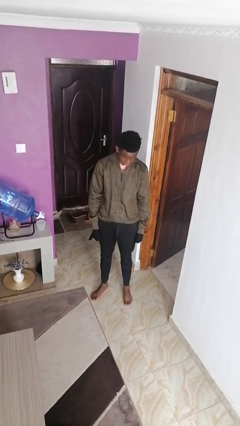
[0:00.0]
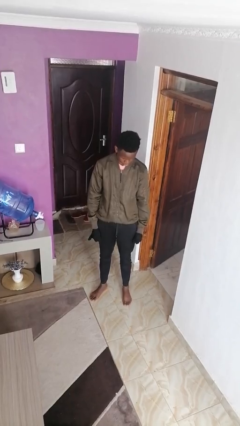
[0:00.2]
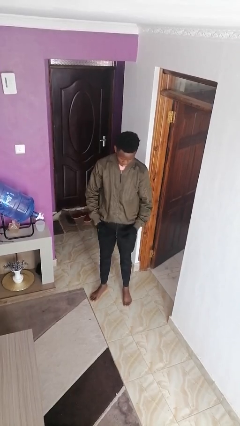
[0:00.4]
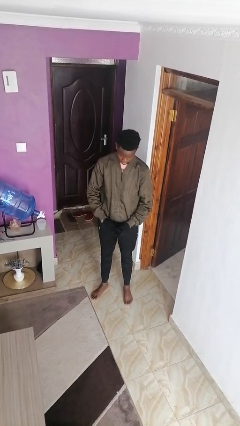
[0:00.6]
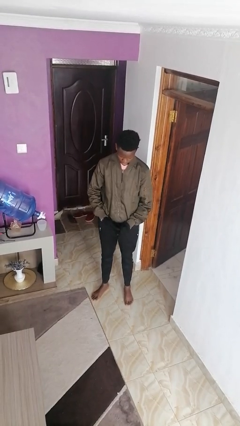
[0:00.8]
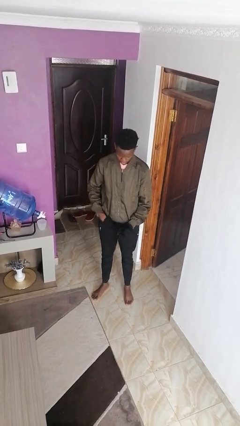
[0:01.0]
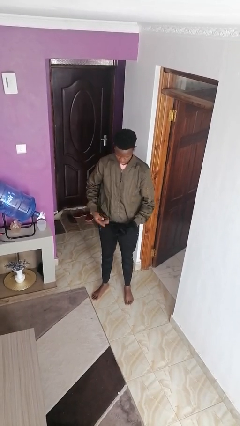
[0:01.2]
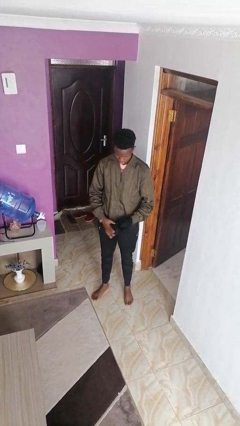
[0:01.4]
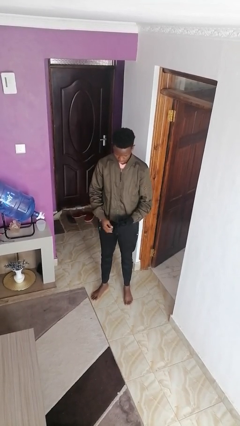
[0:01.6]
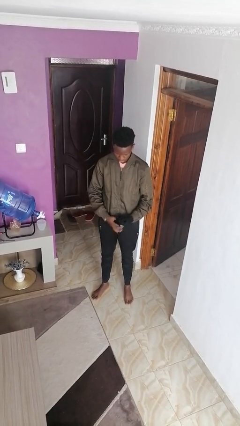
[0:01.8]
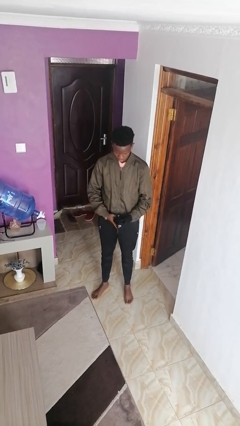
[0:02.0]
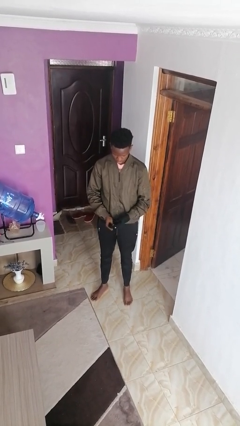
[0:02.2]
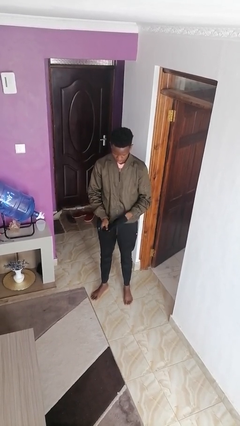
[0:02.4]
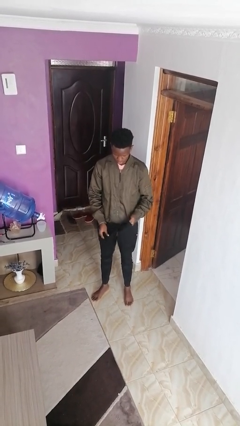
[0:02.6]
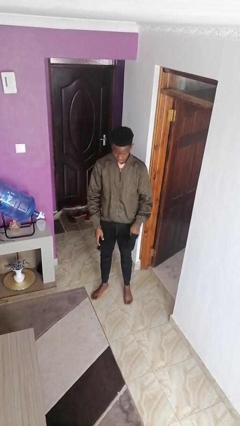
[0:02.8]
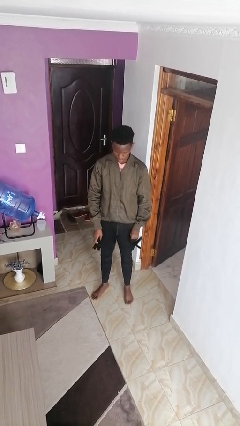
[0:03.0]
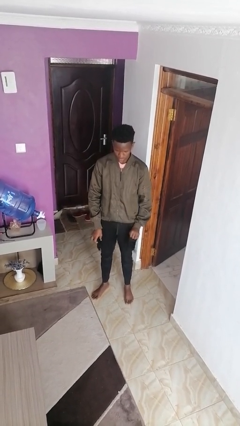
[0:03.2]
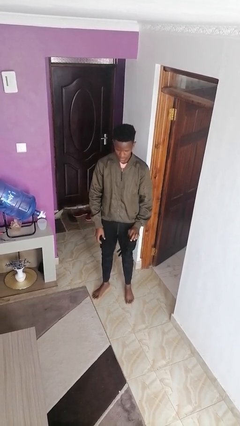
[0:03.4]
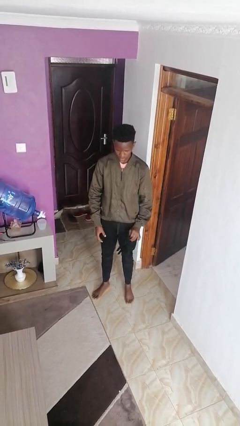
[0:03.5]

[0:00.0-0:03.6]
person takes off gloves

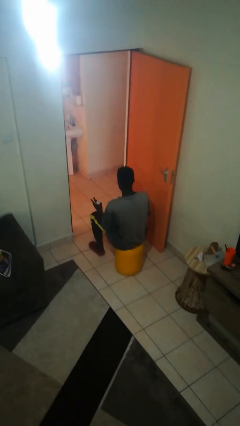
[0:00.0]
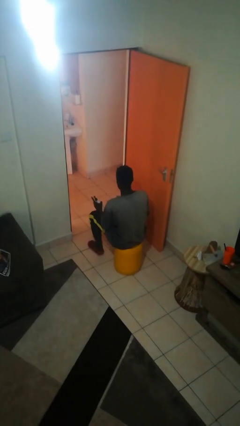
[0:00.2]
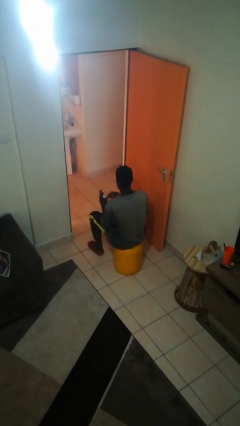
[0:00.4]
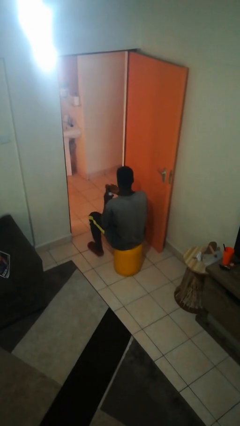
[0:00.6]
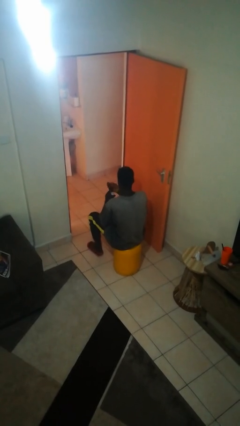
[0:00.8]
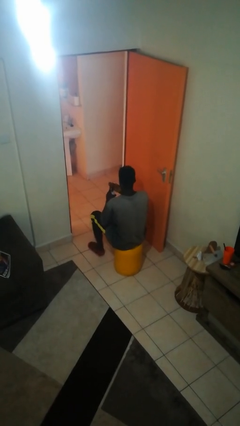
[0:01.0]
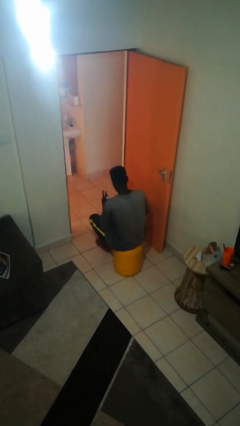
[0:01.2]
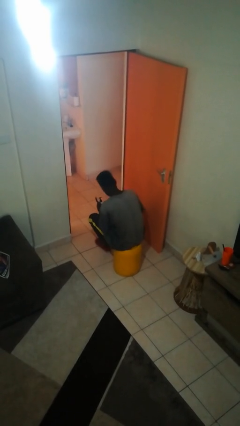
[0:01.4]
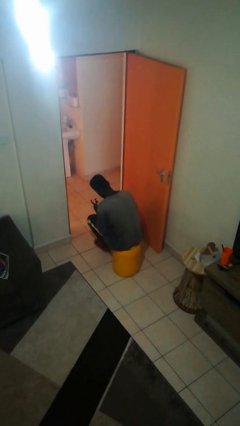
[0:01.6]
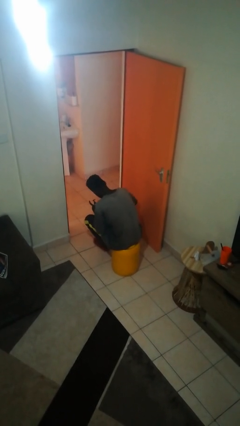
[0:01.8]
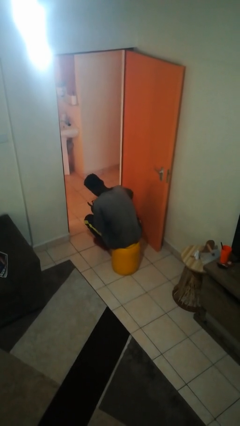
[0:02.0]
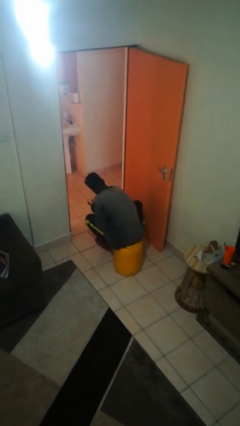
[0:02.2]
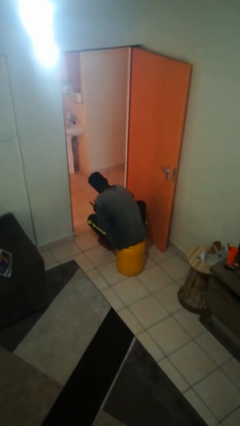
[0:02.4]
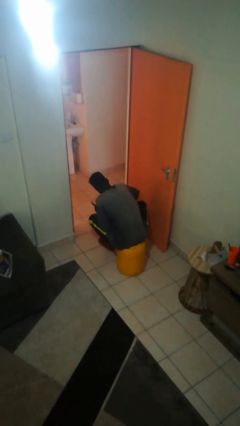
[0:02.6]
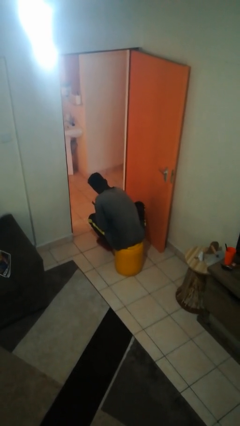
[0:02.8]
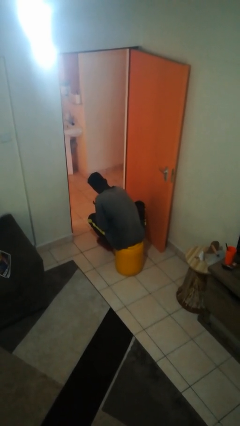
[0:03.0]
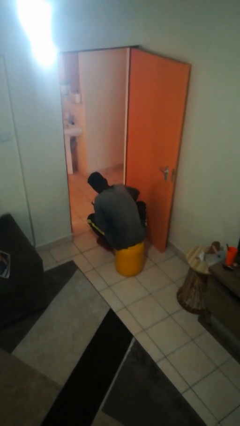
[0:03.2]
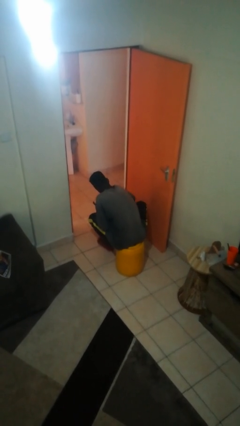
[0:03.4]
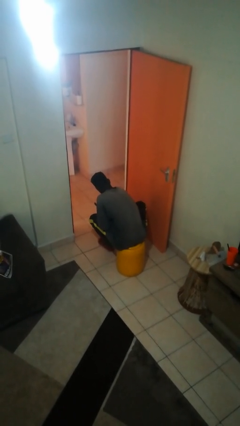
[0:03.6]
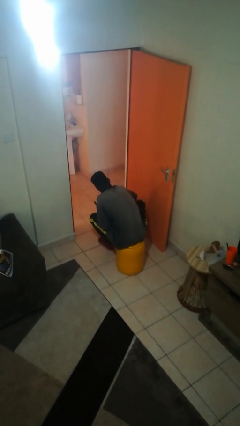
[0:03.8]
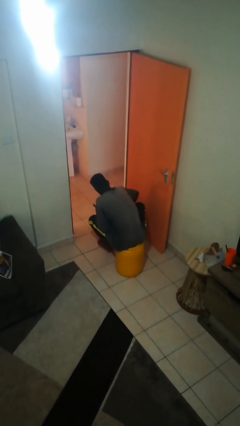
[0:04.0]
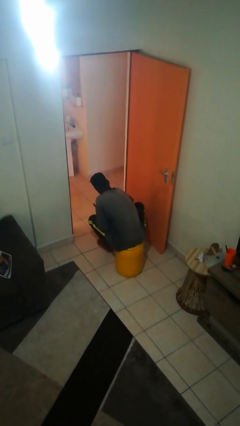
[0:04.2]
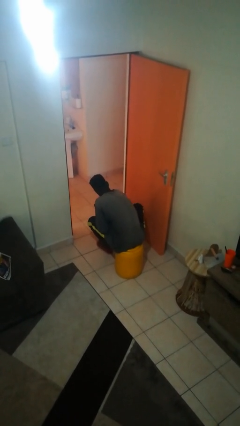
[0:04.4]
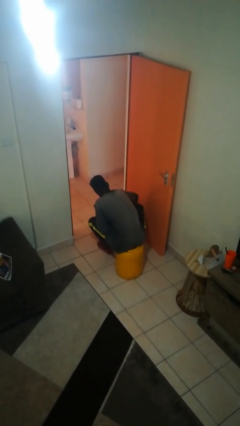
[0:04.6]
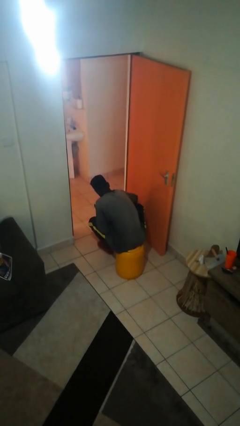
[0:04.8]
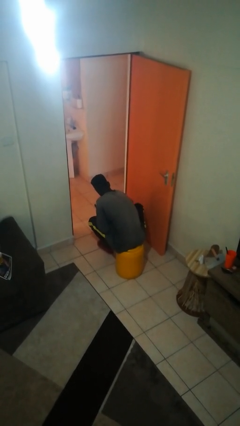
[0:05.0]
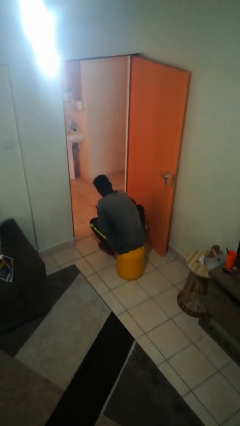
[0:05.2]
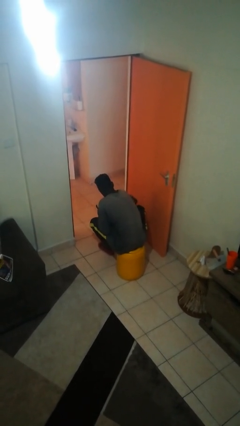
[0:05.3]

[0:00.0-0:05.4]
person applies sunscreen

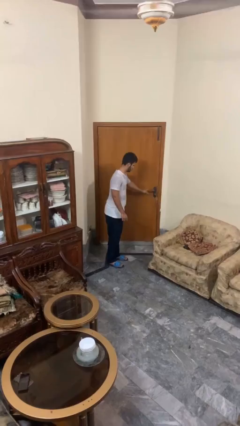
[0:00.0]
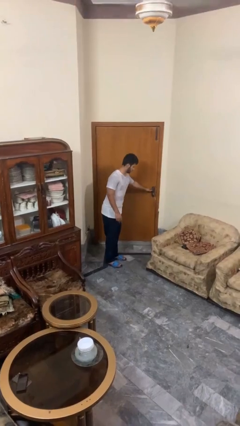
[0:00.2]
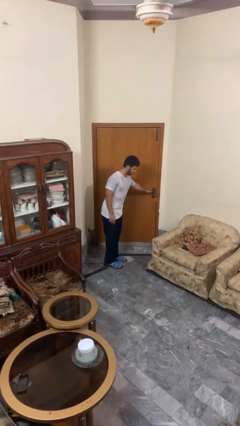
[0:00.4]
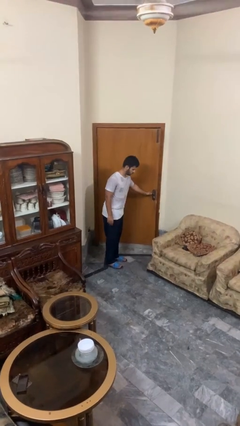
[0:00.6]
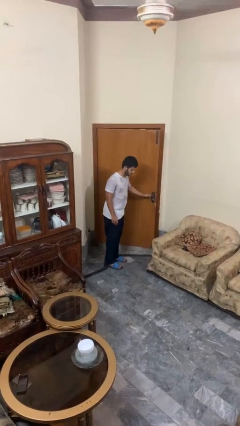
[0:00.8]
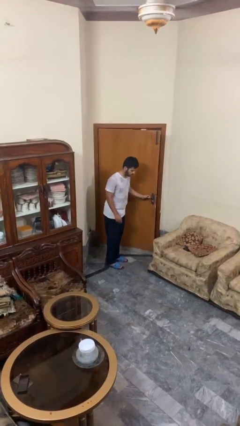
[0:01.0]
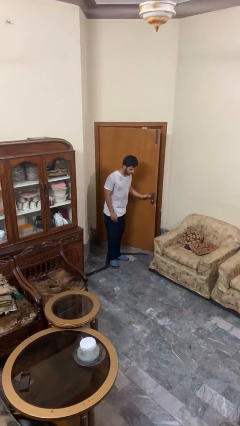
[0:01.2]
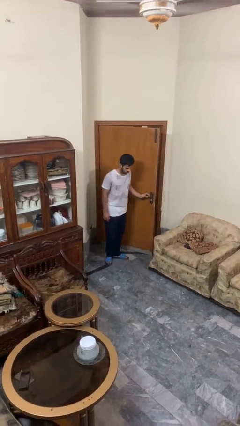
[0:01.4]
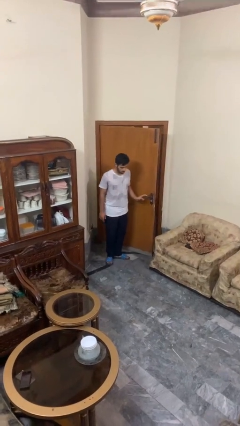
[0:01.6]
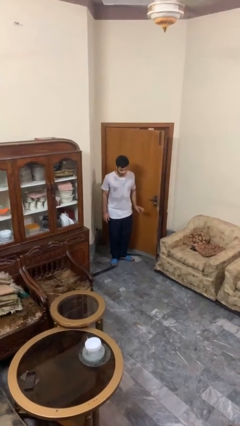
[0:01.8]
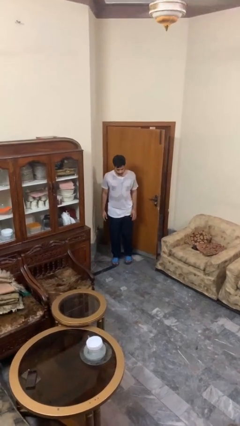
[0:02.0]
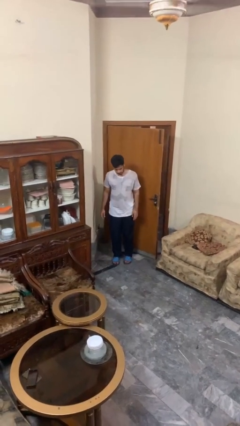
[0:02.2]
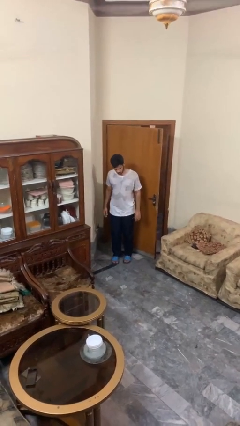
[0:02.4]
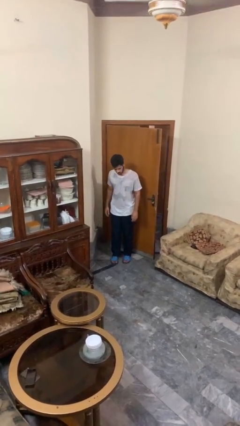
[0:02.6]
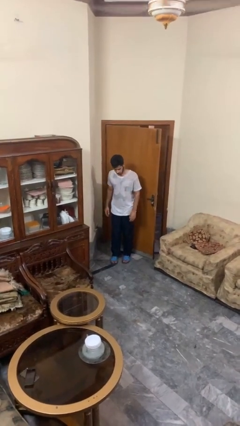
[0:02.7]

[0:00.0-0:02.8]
person opens facility door

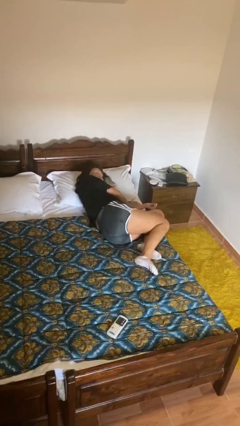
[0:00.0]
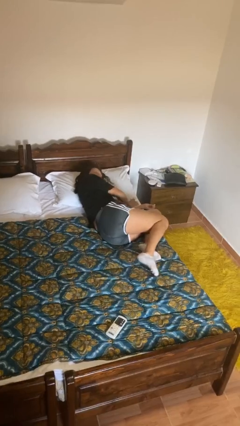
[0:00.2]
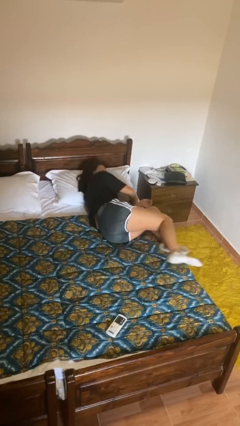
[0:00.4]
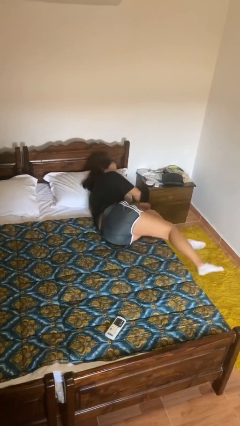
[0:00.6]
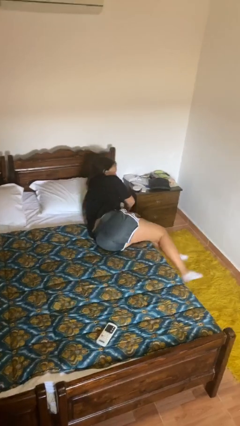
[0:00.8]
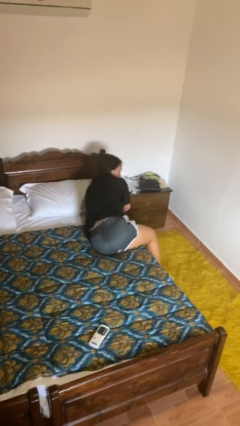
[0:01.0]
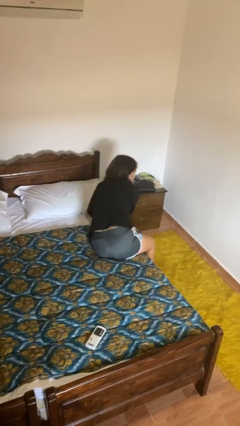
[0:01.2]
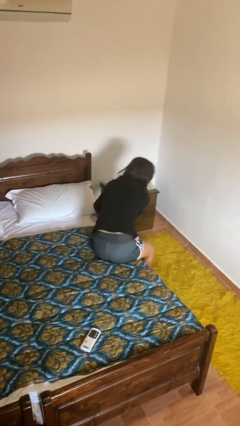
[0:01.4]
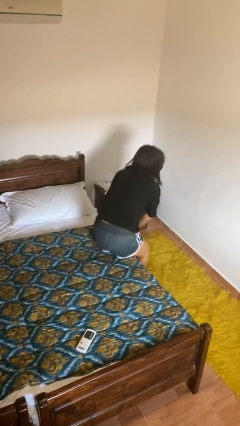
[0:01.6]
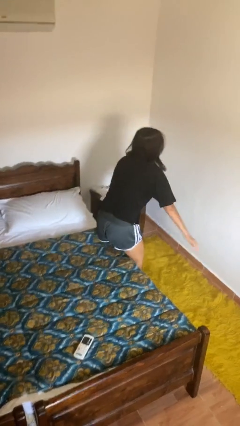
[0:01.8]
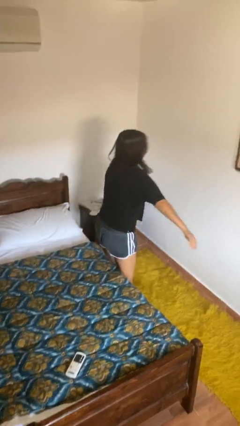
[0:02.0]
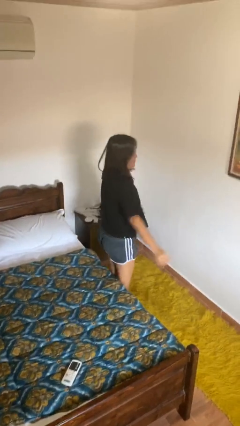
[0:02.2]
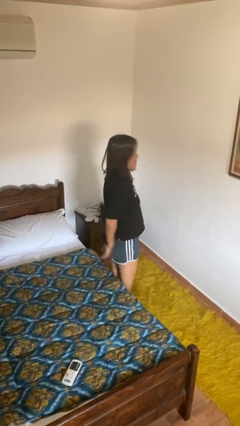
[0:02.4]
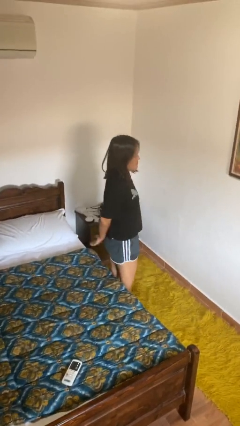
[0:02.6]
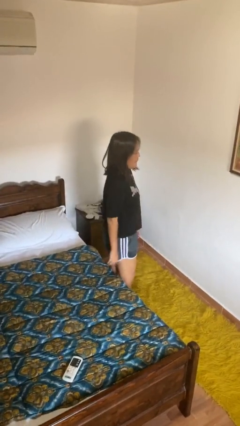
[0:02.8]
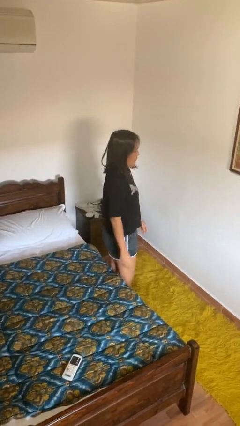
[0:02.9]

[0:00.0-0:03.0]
person stands up

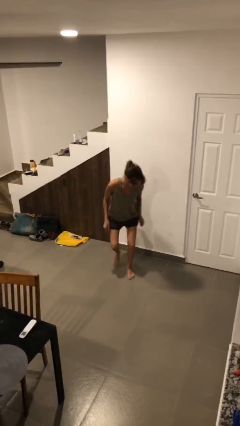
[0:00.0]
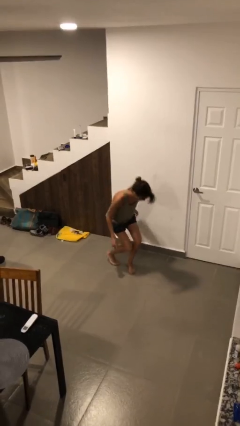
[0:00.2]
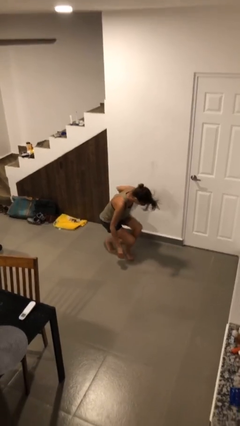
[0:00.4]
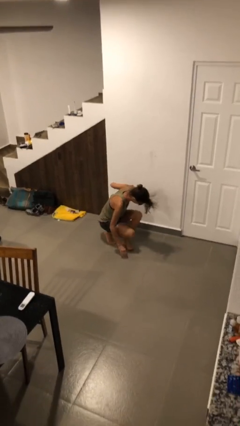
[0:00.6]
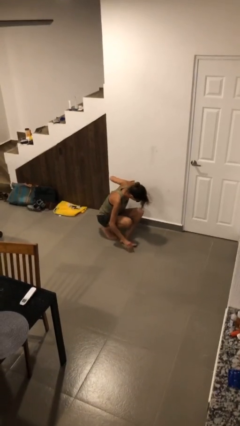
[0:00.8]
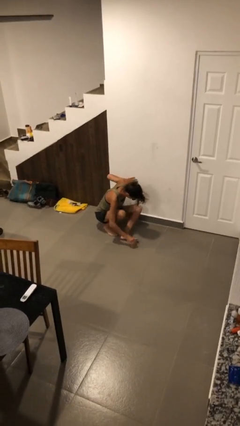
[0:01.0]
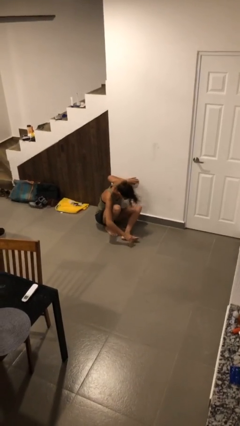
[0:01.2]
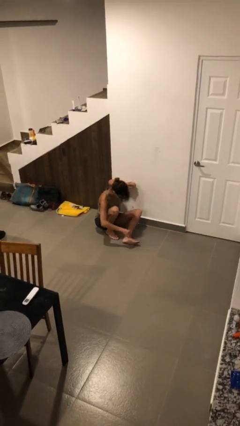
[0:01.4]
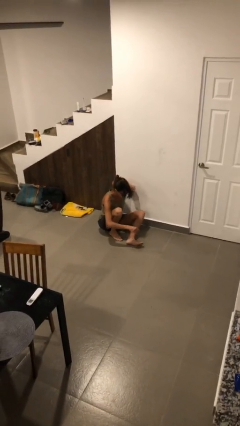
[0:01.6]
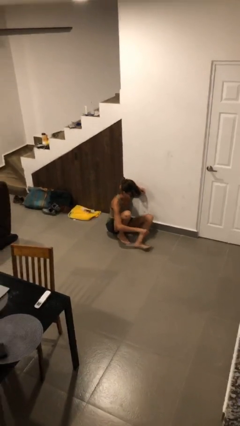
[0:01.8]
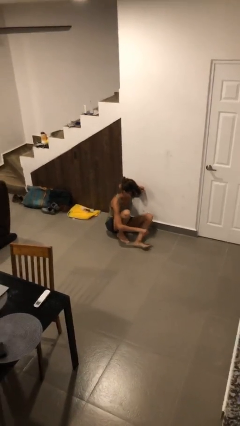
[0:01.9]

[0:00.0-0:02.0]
person sits down

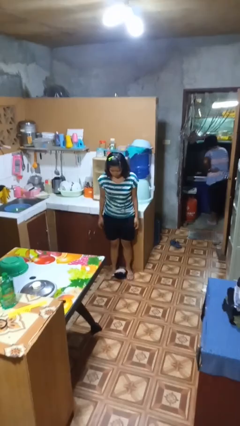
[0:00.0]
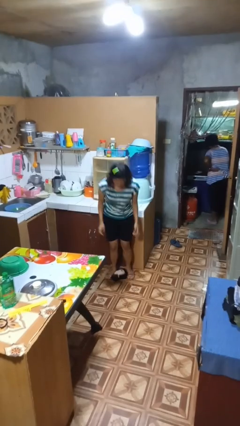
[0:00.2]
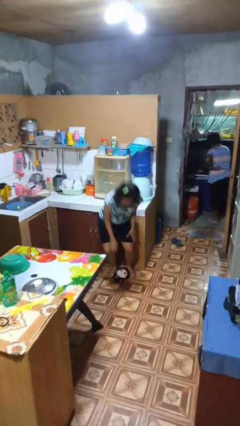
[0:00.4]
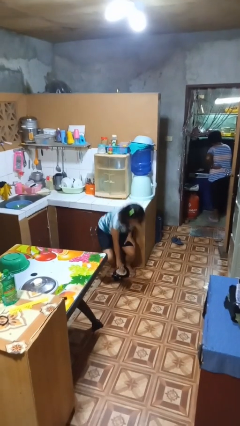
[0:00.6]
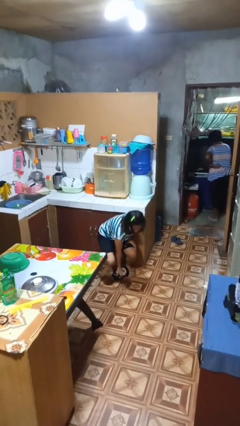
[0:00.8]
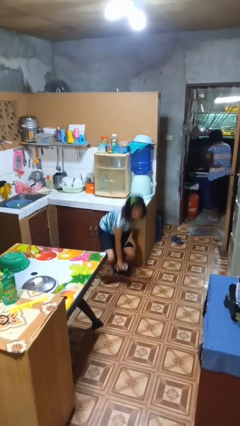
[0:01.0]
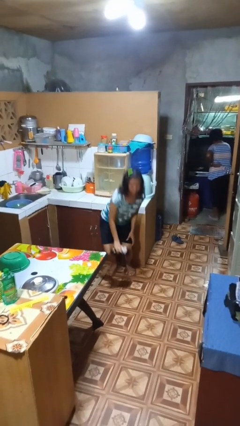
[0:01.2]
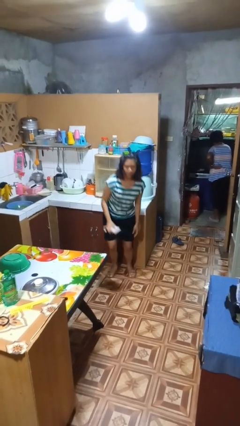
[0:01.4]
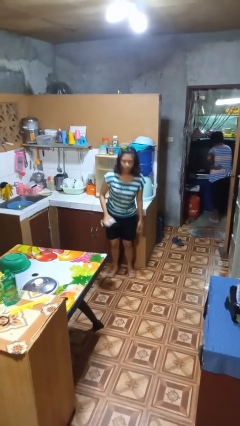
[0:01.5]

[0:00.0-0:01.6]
person picks up object from floor
